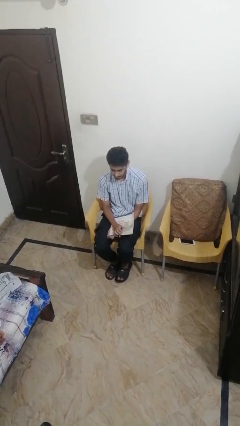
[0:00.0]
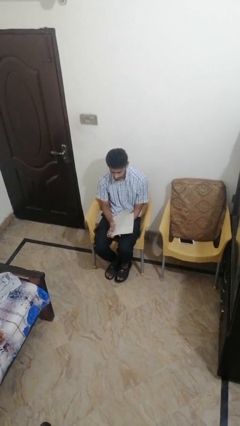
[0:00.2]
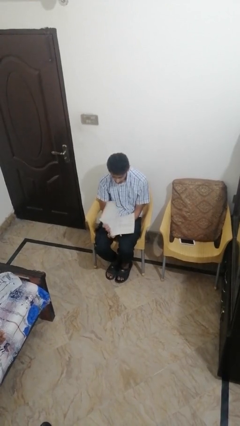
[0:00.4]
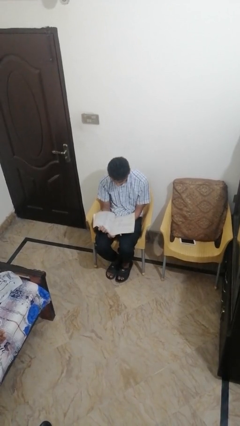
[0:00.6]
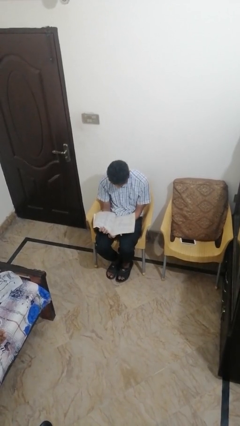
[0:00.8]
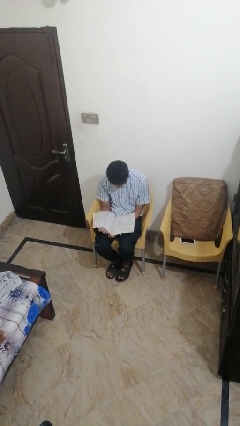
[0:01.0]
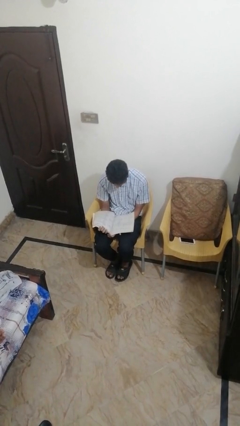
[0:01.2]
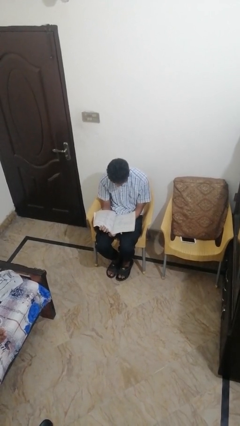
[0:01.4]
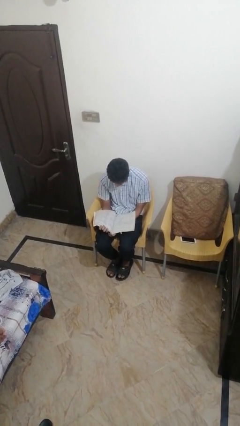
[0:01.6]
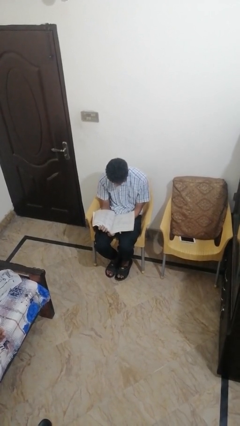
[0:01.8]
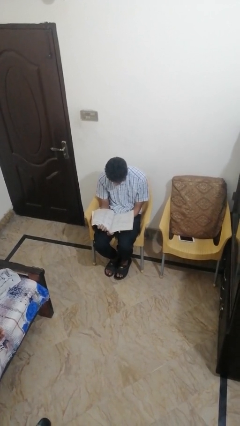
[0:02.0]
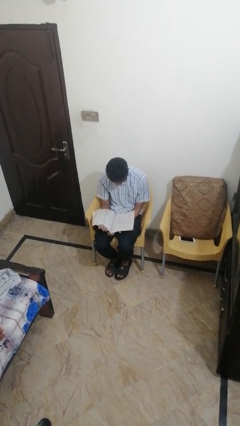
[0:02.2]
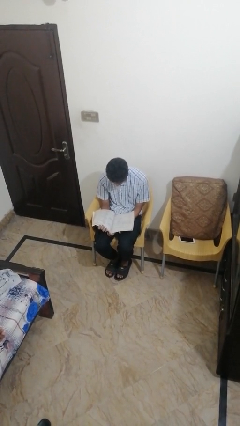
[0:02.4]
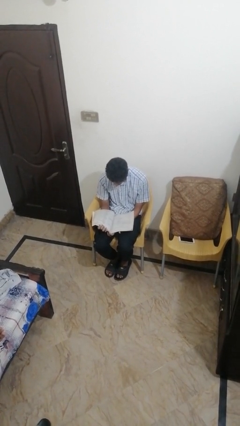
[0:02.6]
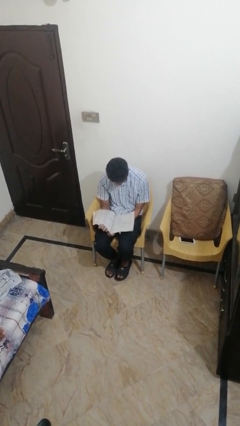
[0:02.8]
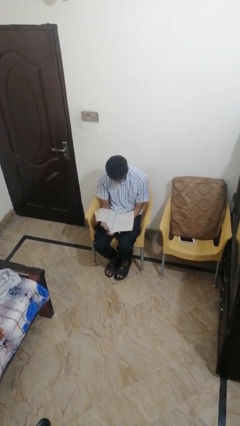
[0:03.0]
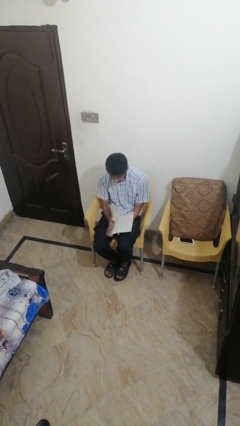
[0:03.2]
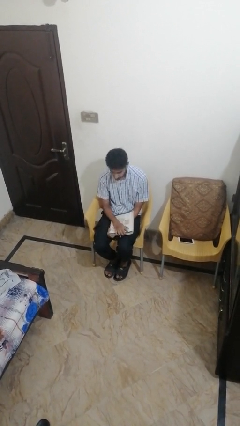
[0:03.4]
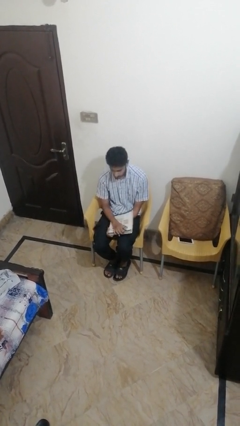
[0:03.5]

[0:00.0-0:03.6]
person reads magazine

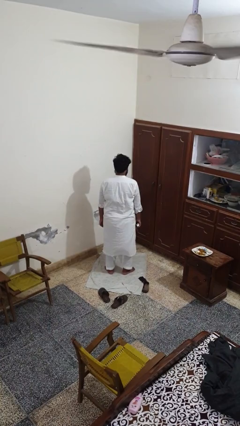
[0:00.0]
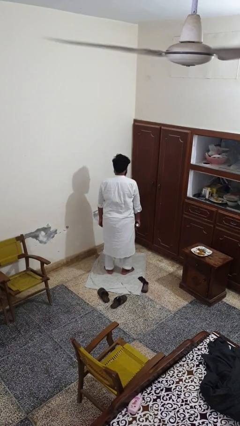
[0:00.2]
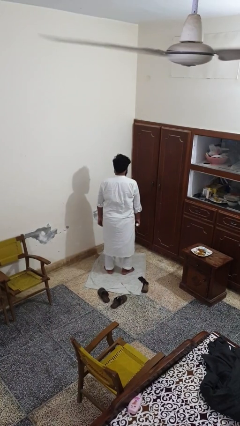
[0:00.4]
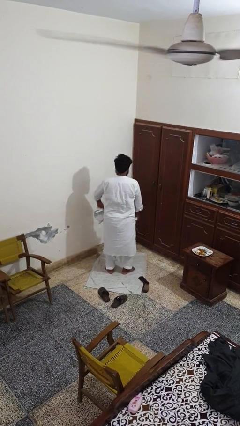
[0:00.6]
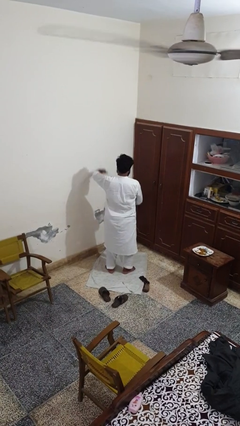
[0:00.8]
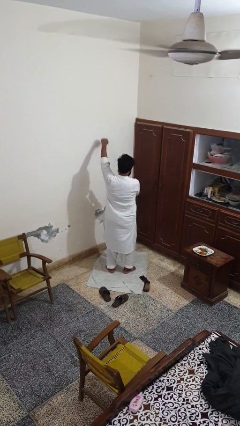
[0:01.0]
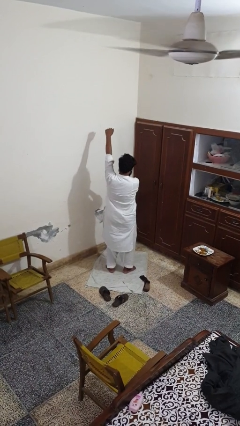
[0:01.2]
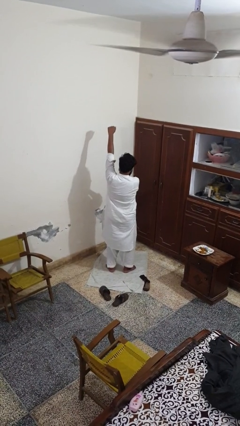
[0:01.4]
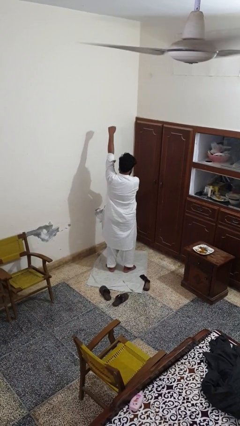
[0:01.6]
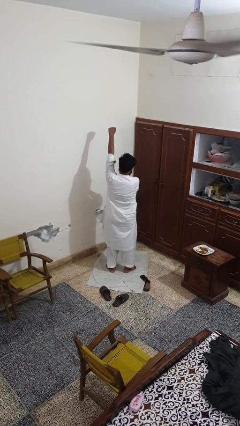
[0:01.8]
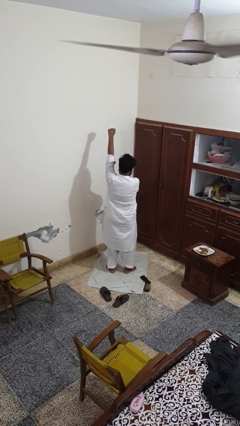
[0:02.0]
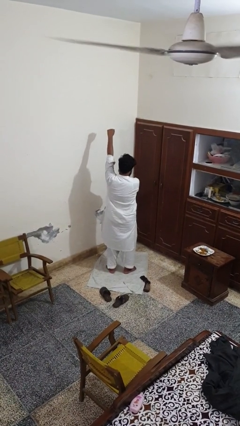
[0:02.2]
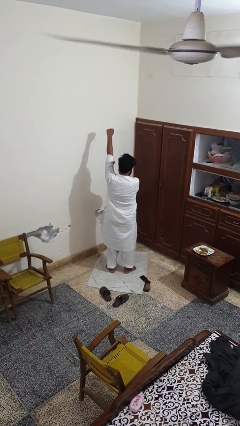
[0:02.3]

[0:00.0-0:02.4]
person applies deodorant

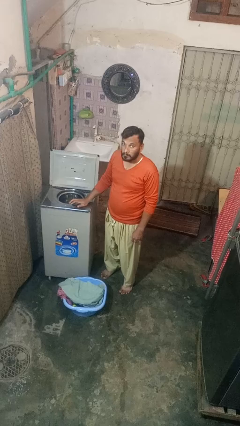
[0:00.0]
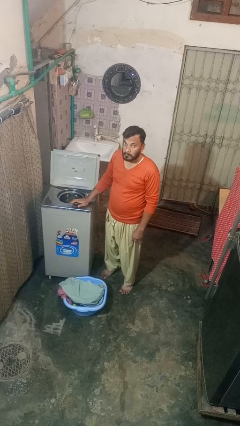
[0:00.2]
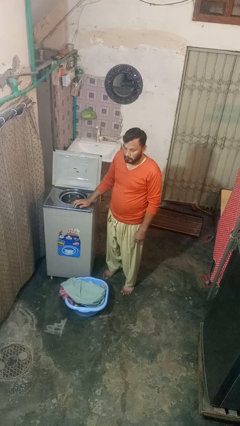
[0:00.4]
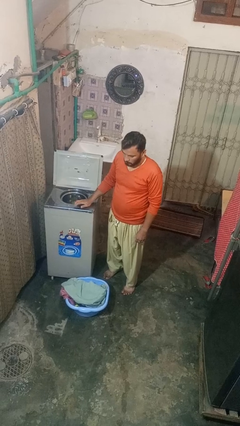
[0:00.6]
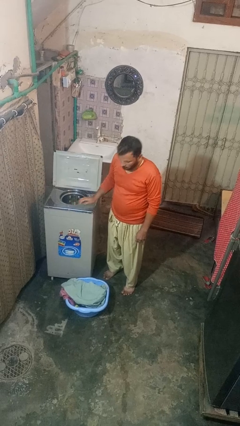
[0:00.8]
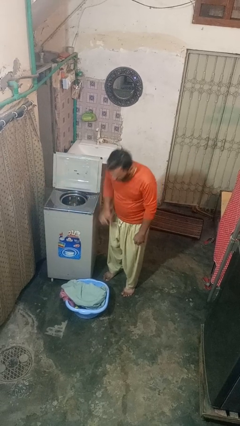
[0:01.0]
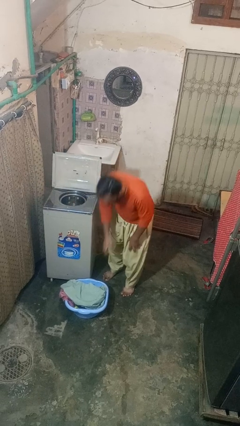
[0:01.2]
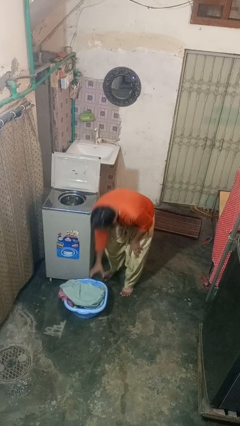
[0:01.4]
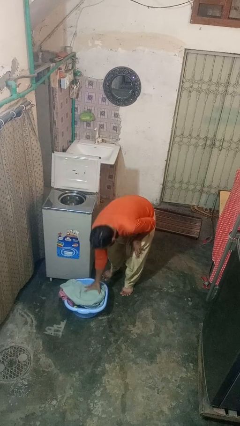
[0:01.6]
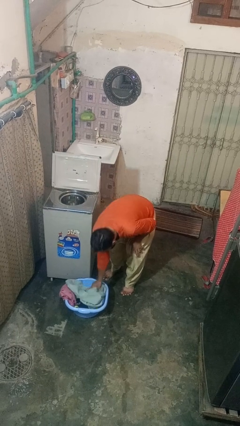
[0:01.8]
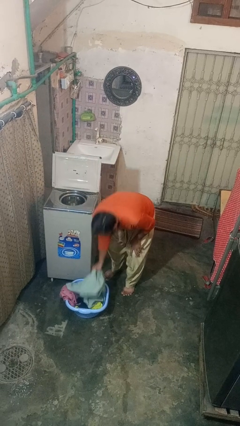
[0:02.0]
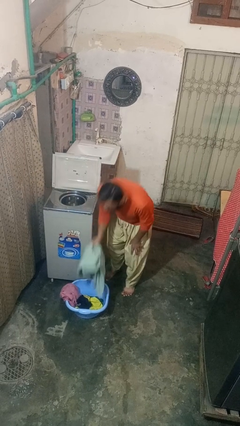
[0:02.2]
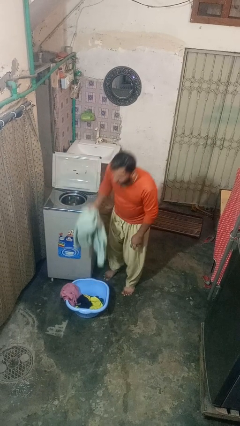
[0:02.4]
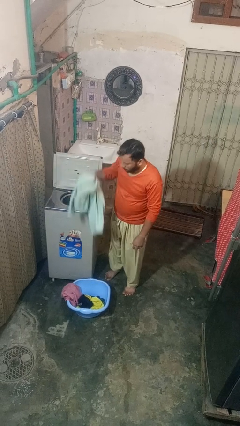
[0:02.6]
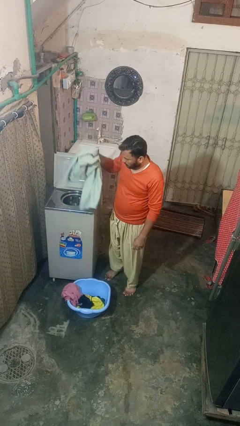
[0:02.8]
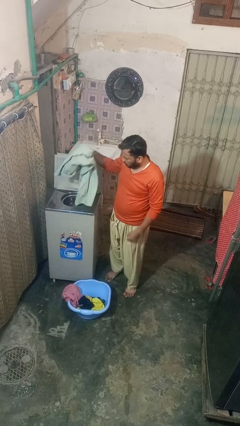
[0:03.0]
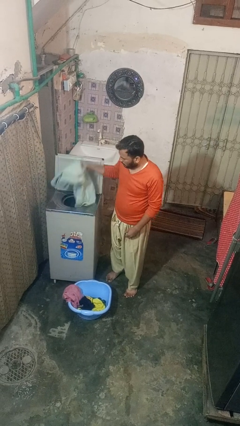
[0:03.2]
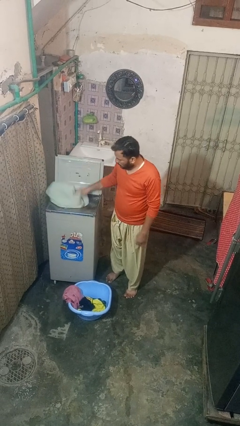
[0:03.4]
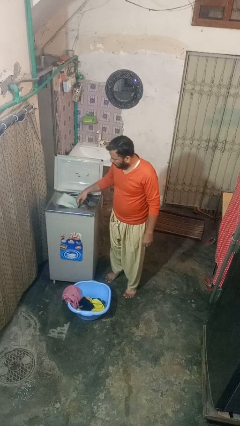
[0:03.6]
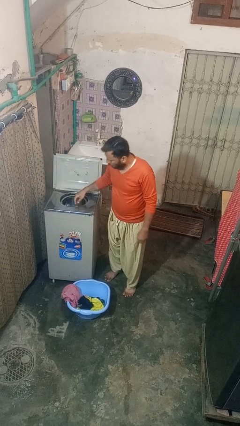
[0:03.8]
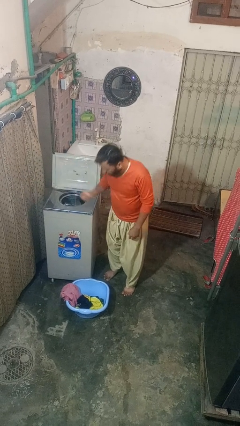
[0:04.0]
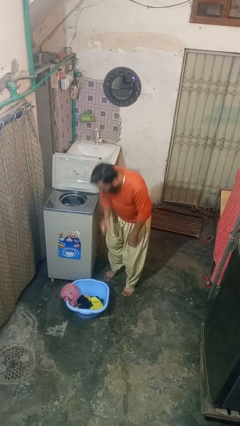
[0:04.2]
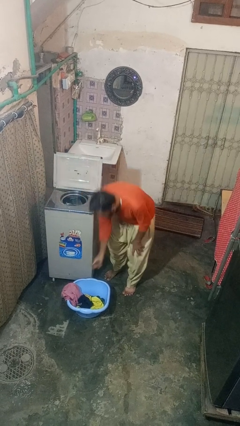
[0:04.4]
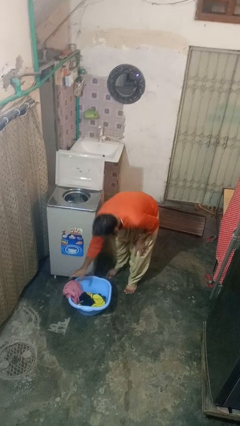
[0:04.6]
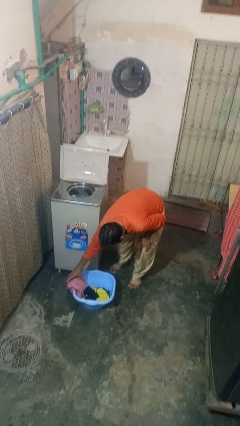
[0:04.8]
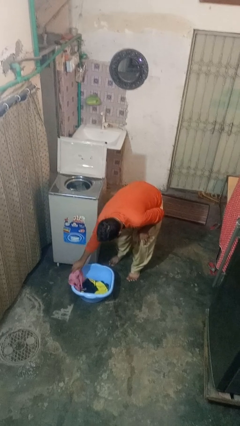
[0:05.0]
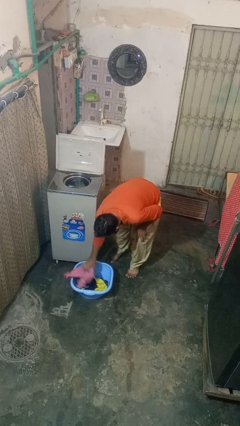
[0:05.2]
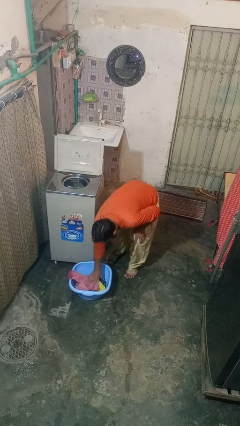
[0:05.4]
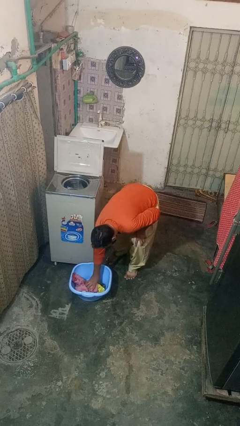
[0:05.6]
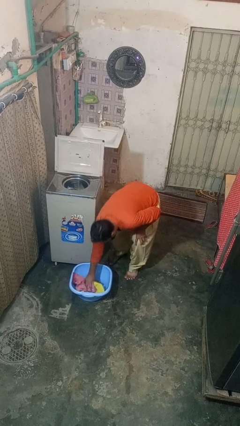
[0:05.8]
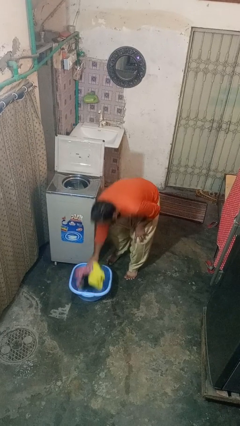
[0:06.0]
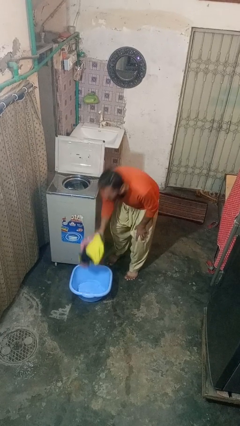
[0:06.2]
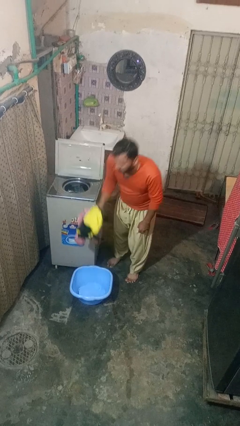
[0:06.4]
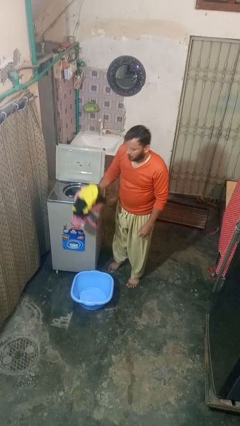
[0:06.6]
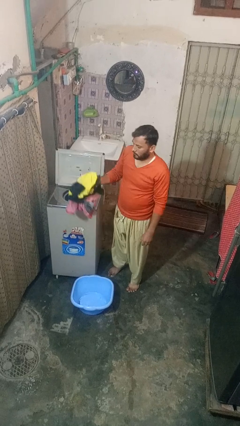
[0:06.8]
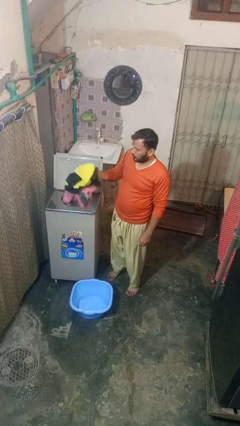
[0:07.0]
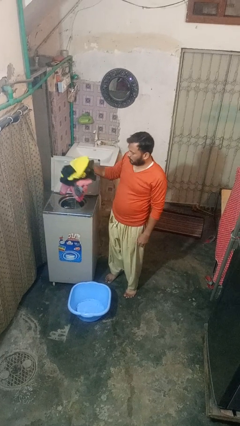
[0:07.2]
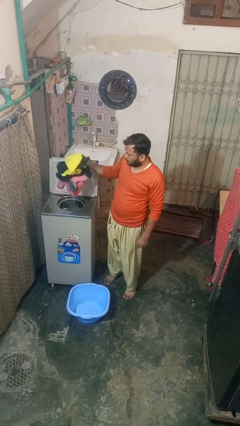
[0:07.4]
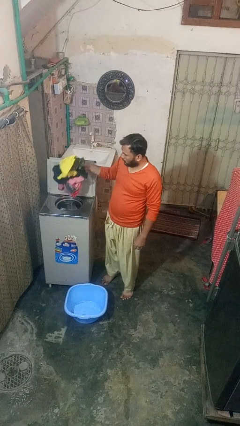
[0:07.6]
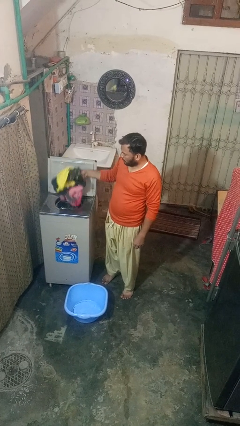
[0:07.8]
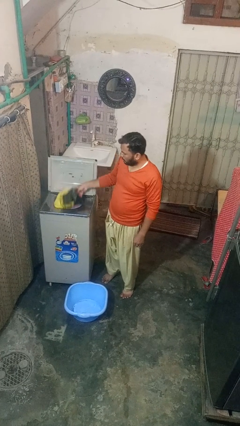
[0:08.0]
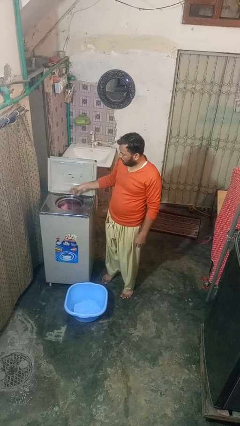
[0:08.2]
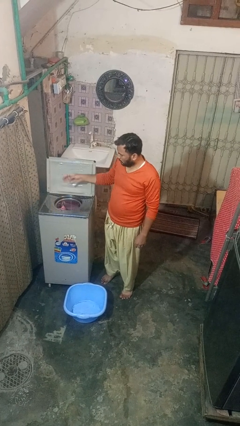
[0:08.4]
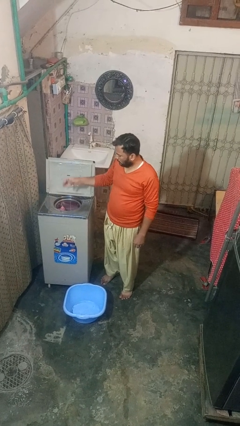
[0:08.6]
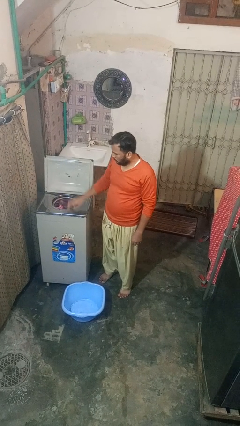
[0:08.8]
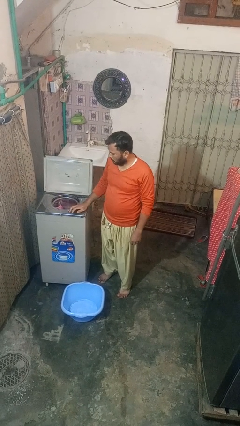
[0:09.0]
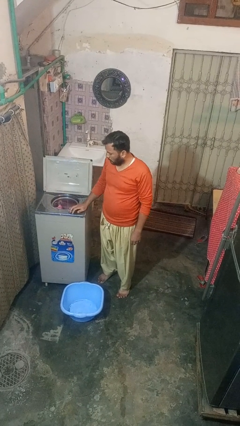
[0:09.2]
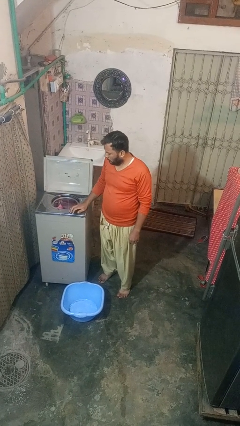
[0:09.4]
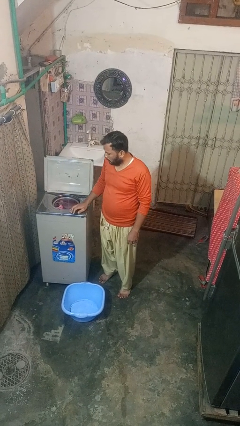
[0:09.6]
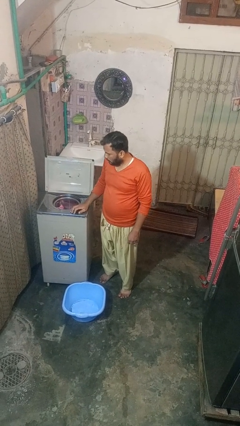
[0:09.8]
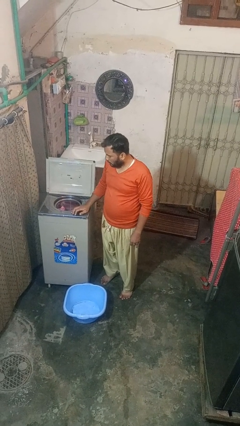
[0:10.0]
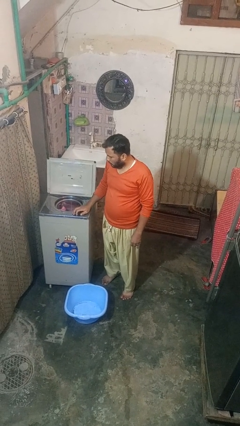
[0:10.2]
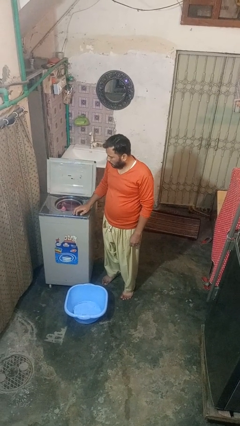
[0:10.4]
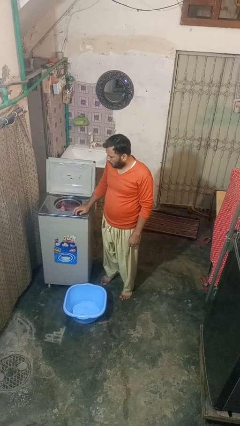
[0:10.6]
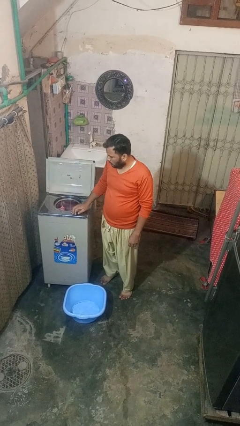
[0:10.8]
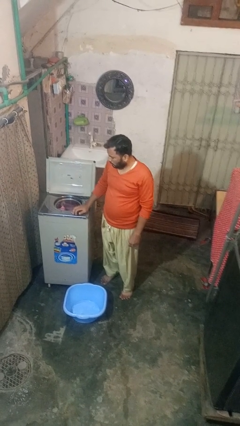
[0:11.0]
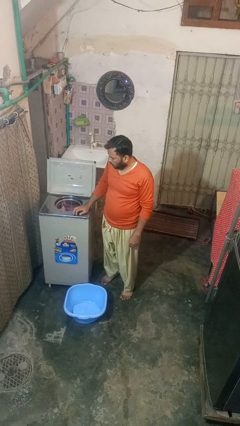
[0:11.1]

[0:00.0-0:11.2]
person loads dryer

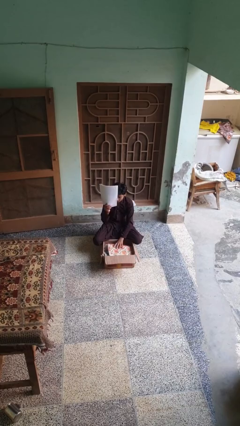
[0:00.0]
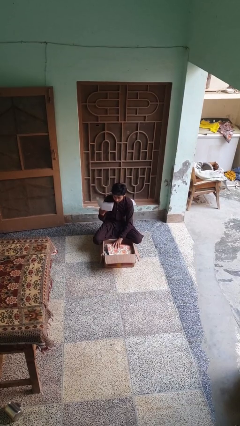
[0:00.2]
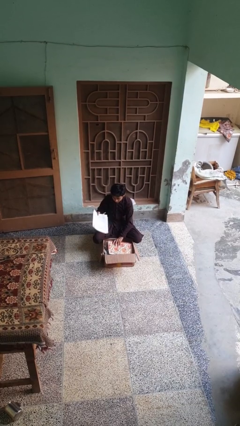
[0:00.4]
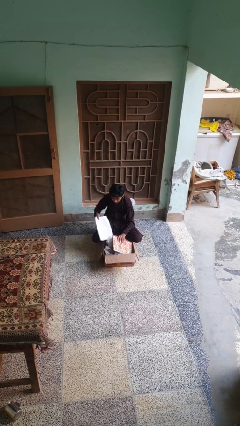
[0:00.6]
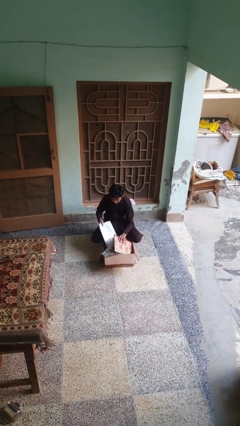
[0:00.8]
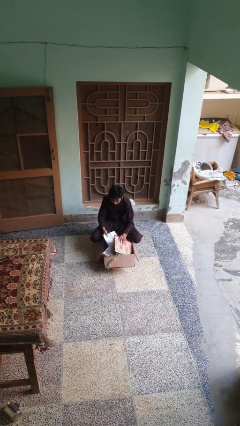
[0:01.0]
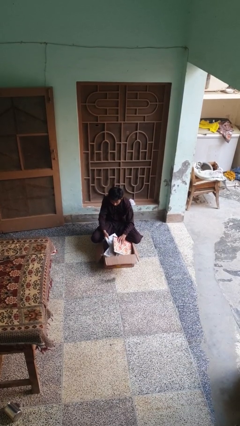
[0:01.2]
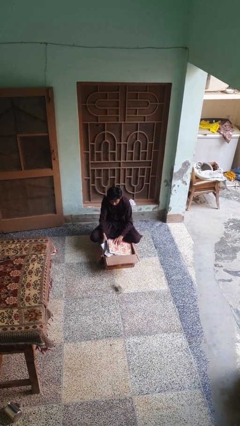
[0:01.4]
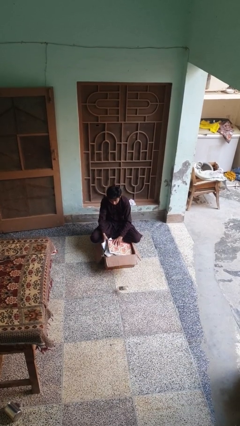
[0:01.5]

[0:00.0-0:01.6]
person puts object into box
